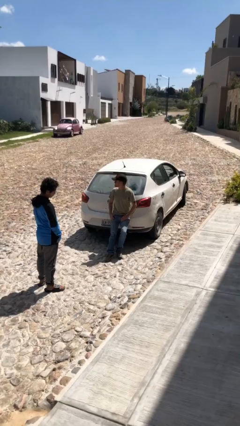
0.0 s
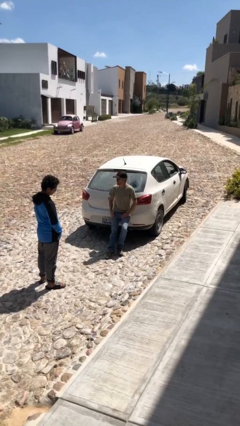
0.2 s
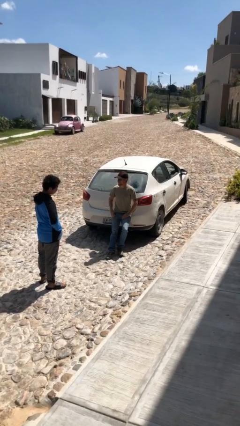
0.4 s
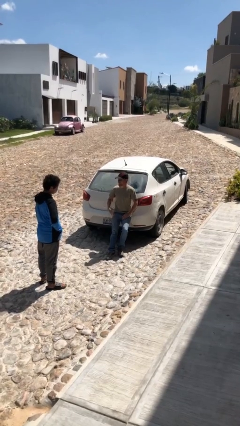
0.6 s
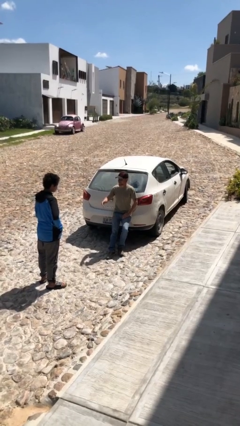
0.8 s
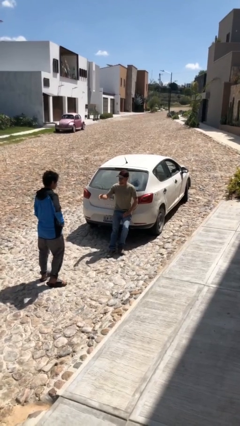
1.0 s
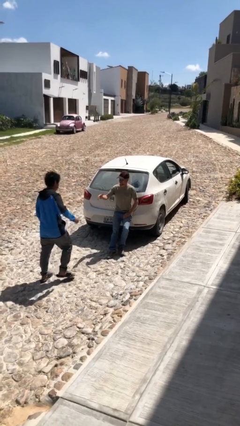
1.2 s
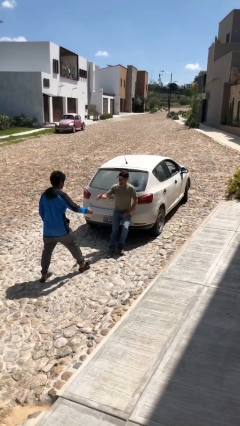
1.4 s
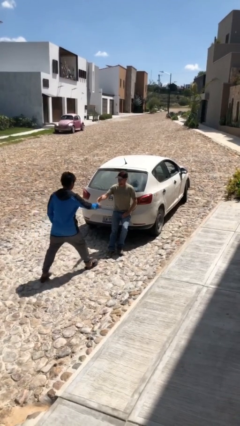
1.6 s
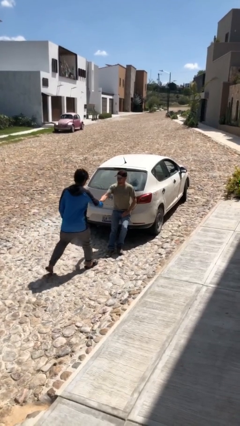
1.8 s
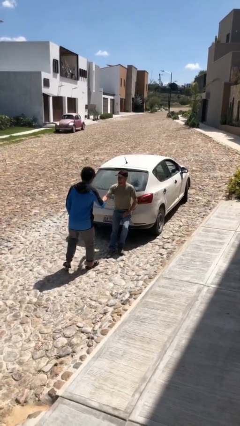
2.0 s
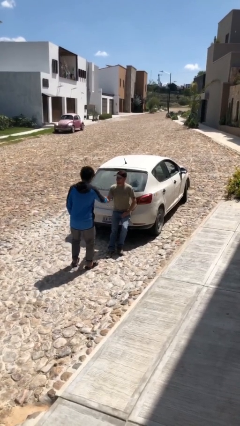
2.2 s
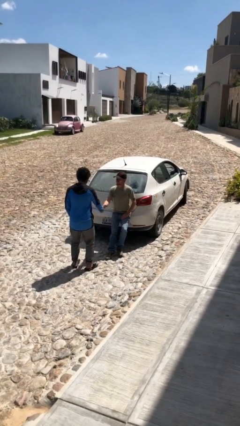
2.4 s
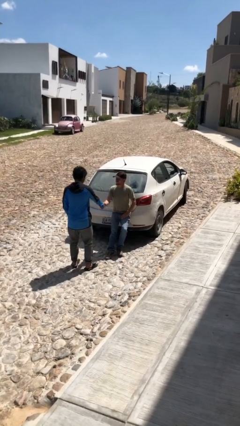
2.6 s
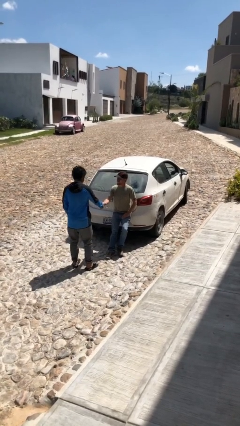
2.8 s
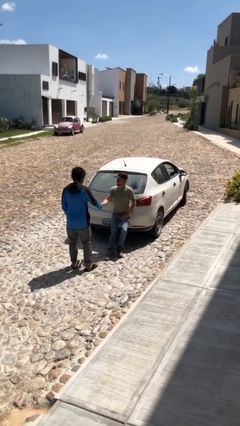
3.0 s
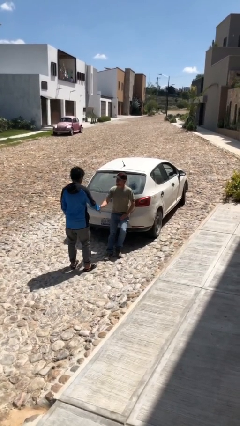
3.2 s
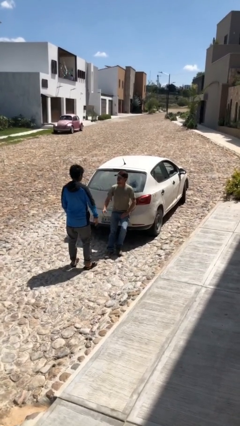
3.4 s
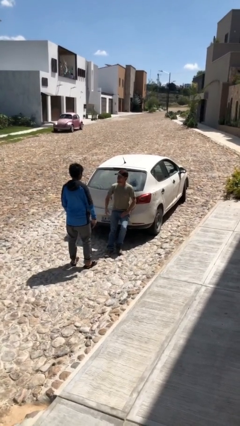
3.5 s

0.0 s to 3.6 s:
person shakes hand

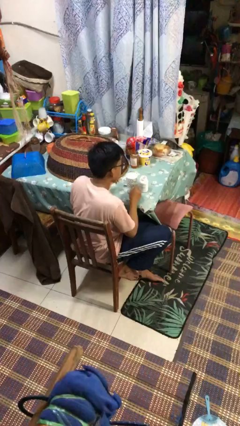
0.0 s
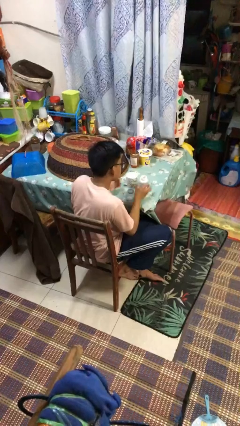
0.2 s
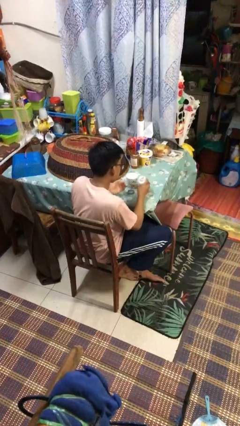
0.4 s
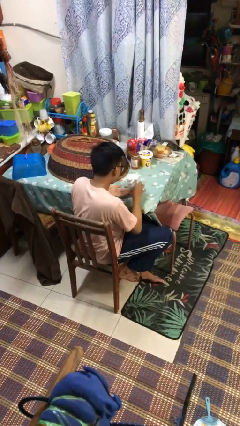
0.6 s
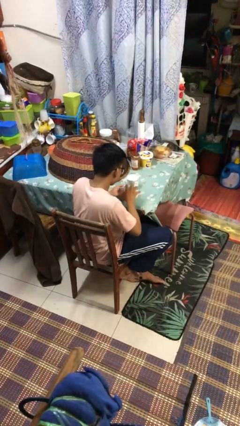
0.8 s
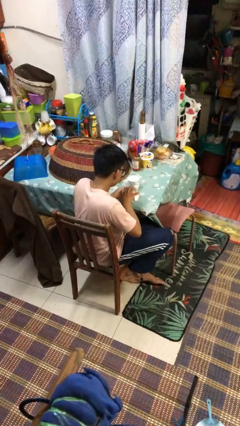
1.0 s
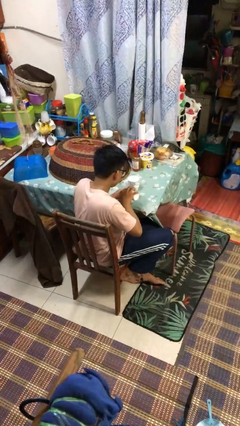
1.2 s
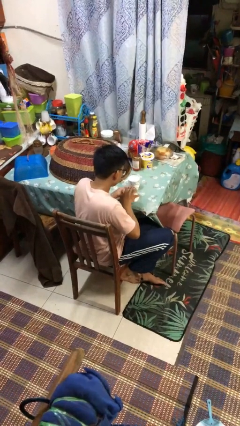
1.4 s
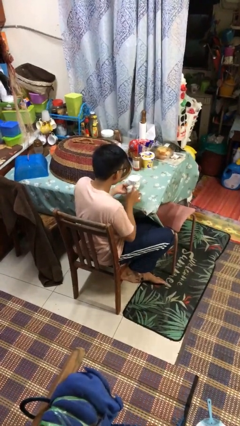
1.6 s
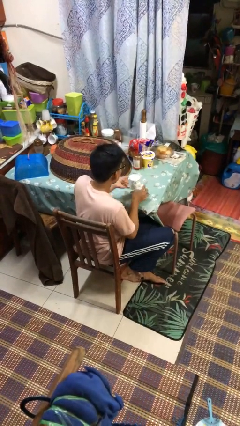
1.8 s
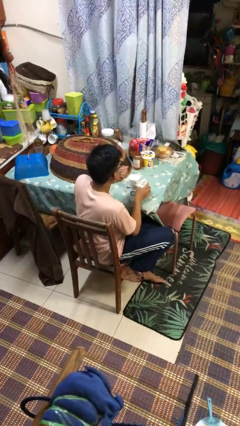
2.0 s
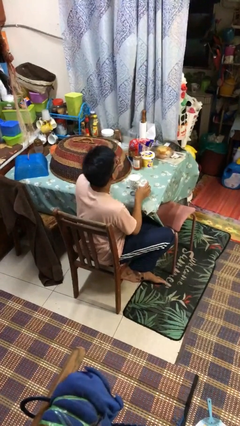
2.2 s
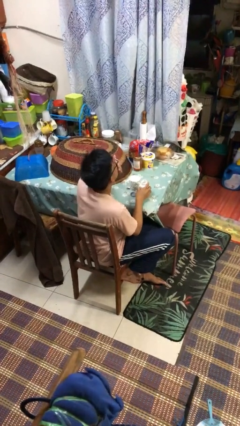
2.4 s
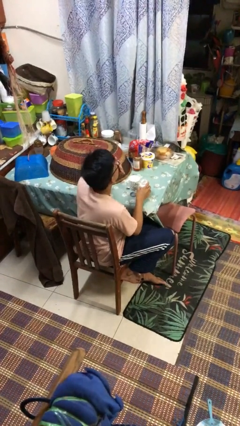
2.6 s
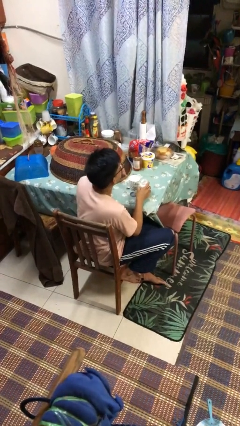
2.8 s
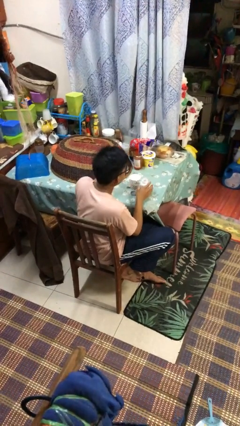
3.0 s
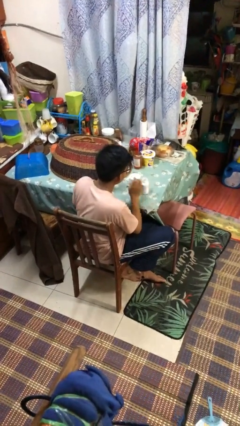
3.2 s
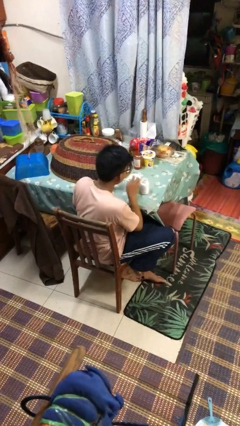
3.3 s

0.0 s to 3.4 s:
person takes medicine pills

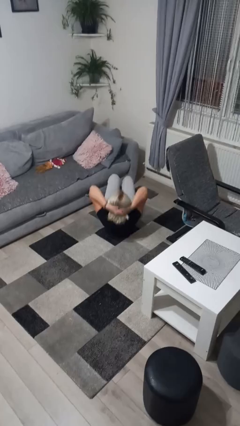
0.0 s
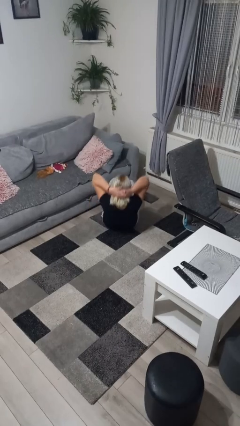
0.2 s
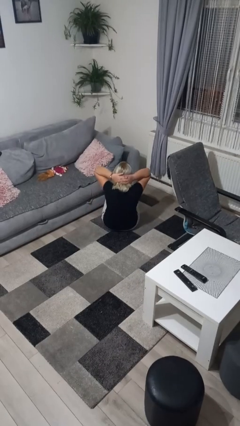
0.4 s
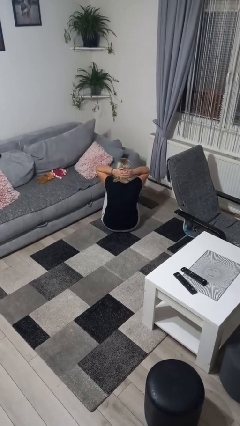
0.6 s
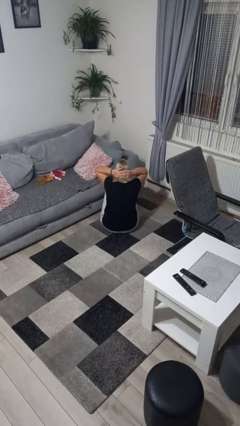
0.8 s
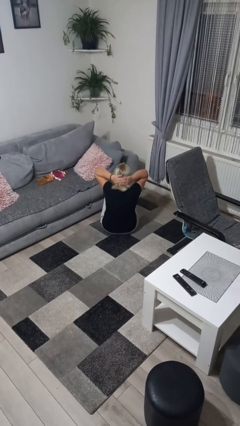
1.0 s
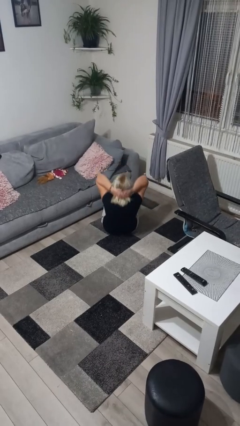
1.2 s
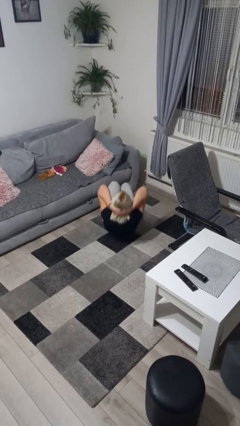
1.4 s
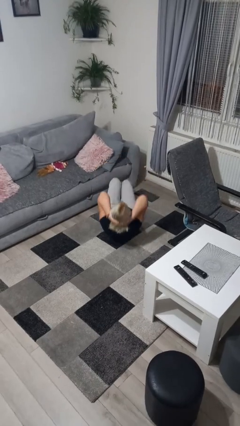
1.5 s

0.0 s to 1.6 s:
person exercises with situp

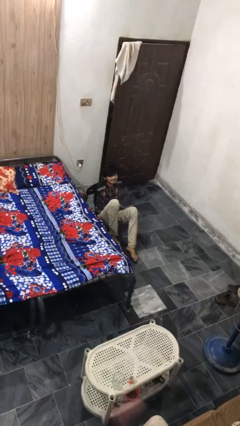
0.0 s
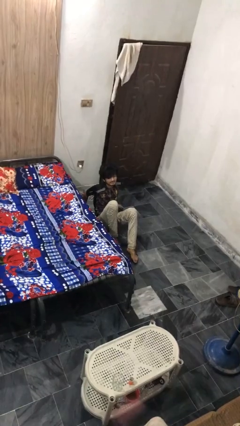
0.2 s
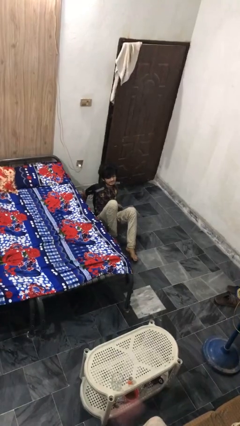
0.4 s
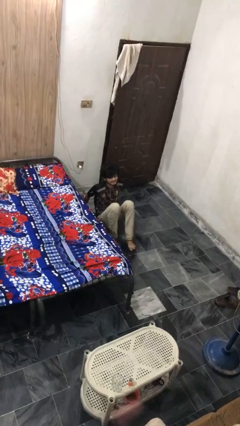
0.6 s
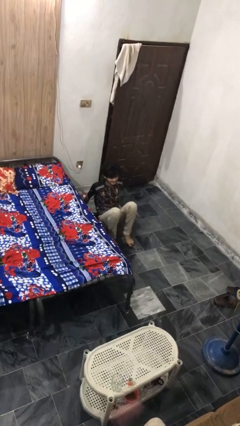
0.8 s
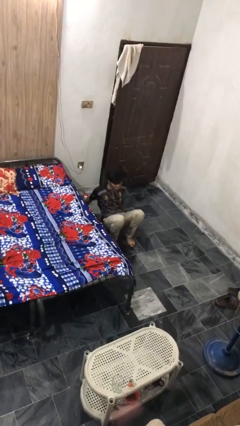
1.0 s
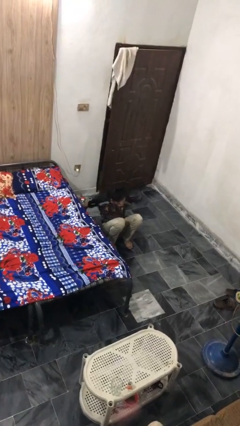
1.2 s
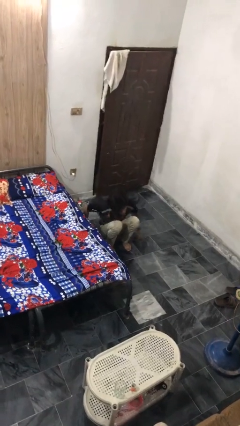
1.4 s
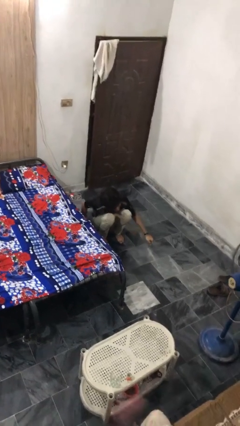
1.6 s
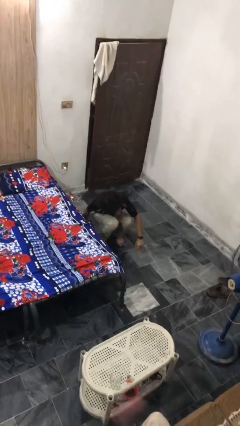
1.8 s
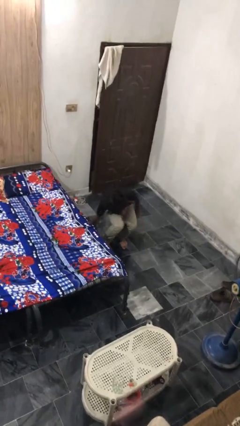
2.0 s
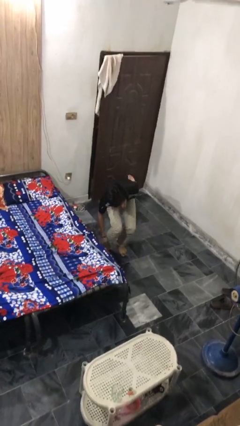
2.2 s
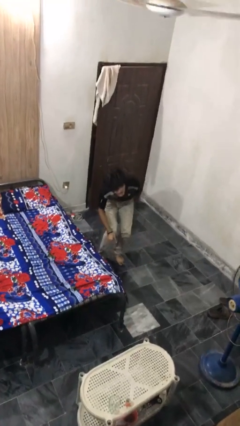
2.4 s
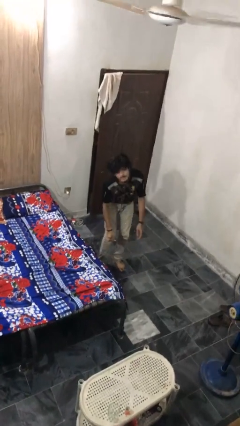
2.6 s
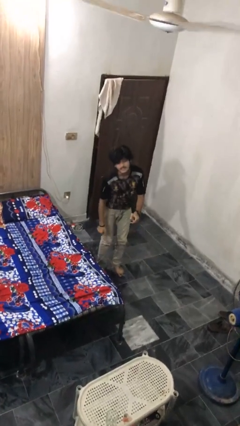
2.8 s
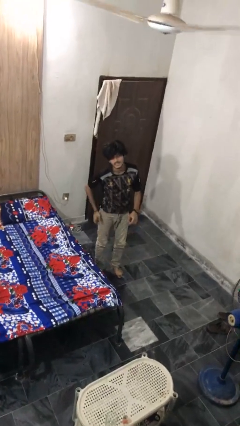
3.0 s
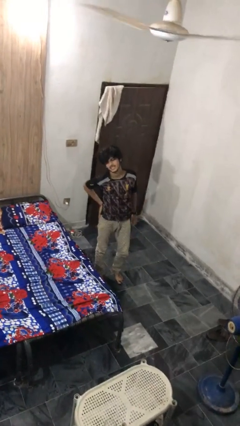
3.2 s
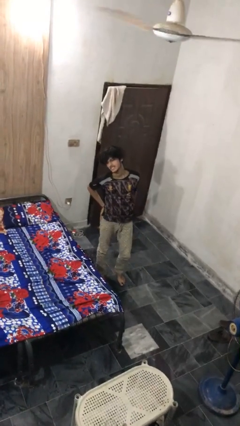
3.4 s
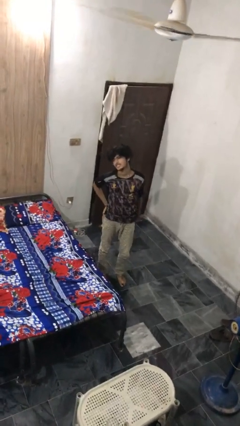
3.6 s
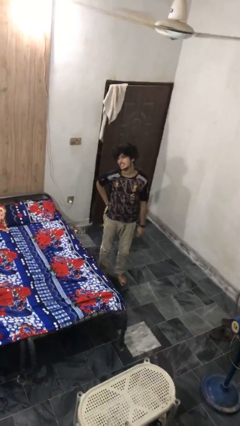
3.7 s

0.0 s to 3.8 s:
person stands up from floor

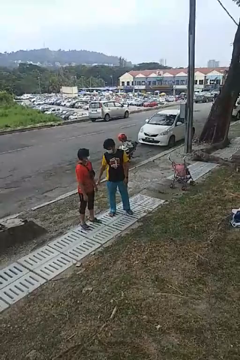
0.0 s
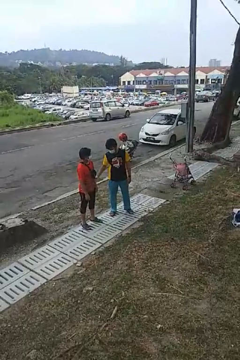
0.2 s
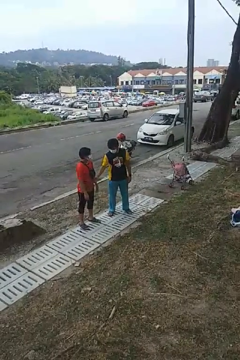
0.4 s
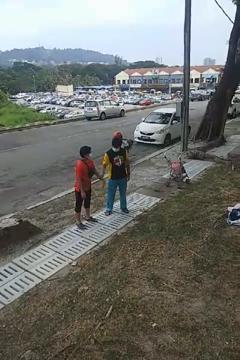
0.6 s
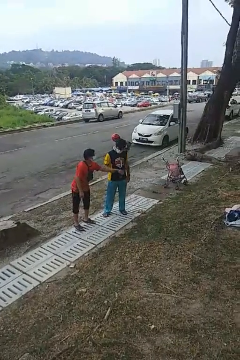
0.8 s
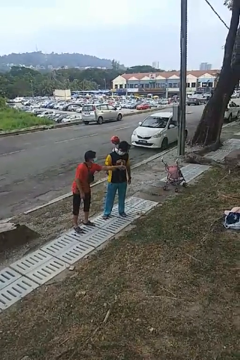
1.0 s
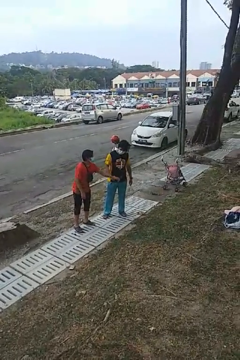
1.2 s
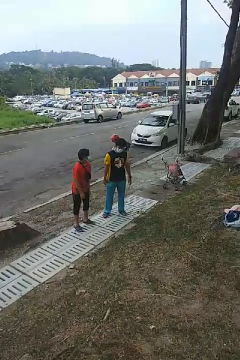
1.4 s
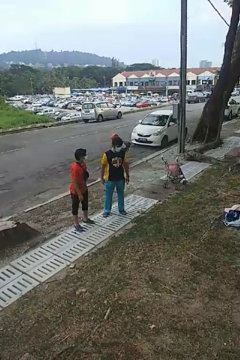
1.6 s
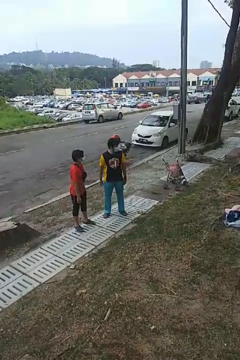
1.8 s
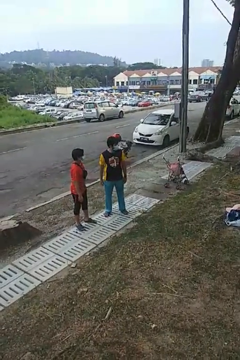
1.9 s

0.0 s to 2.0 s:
person grabs person by forearm

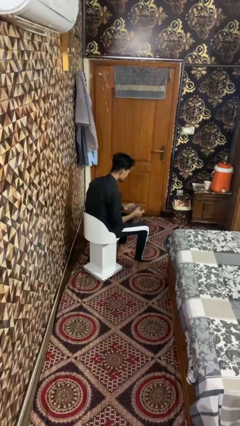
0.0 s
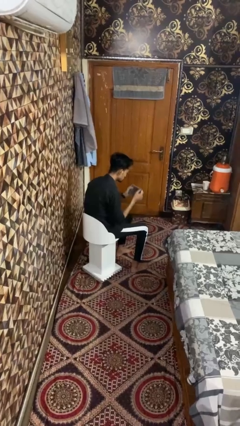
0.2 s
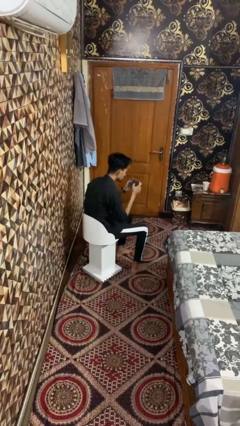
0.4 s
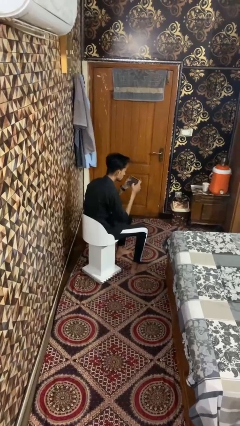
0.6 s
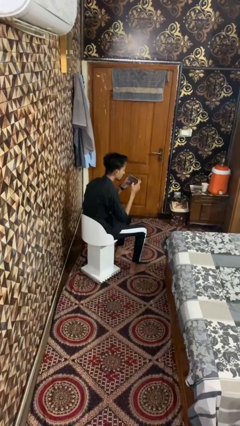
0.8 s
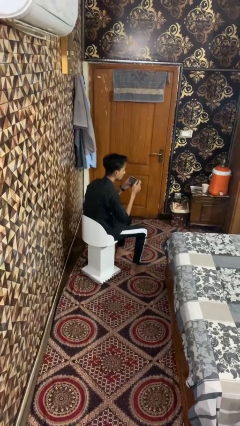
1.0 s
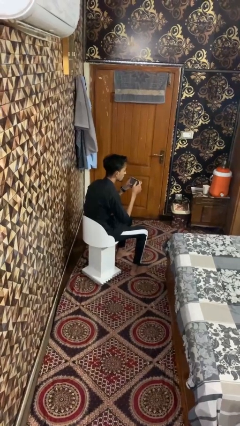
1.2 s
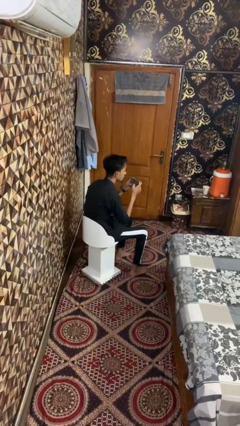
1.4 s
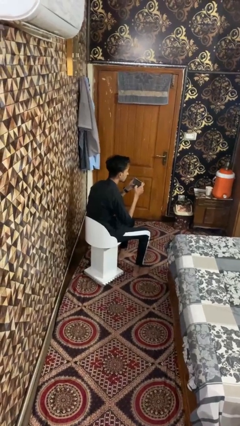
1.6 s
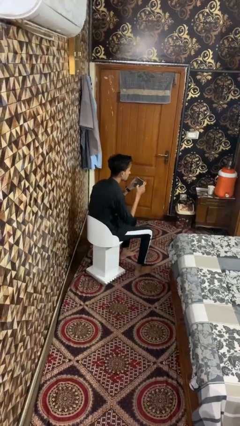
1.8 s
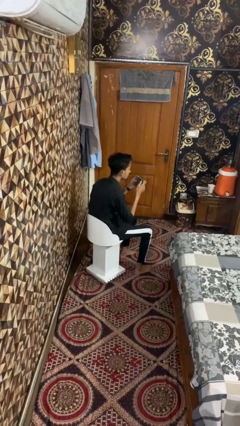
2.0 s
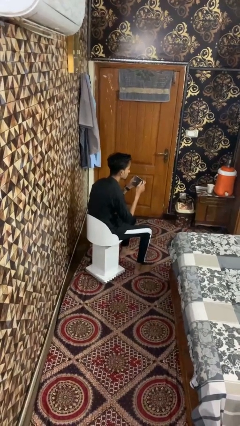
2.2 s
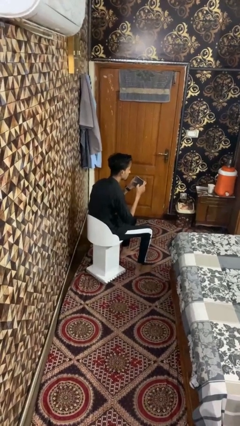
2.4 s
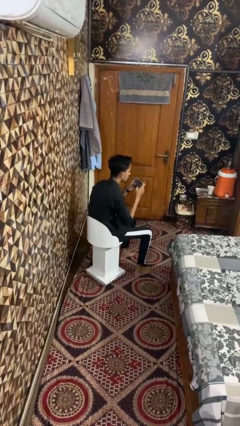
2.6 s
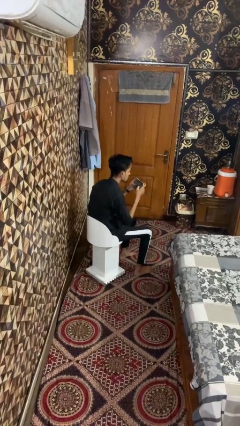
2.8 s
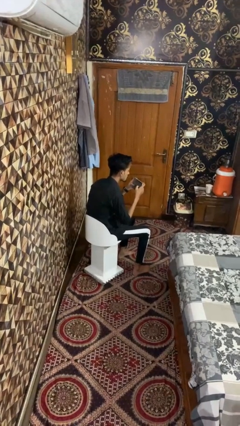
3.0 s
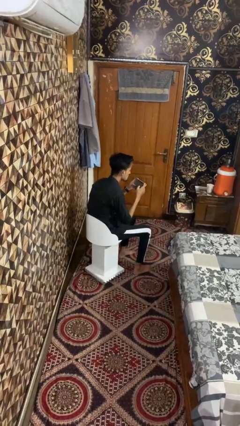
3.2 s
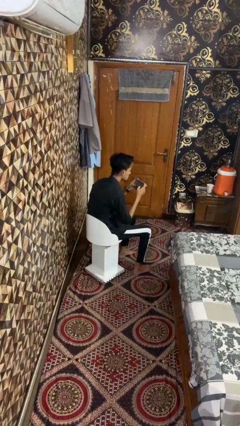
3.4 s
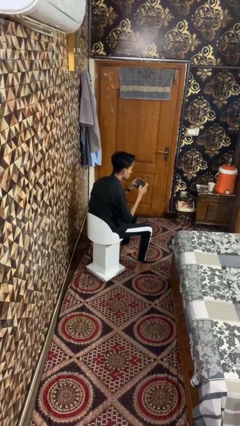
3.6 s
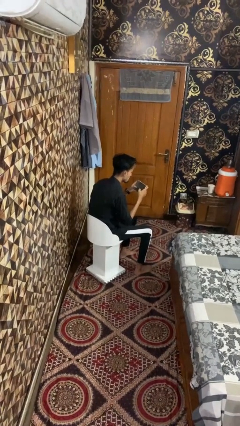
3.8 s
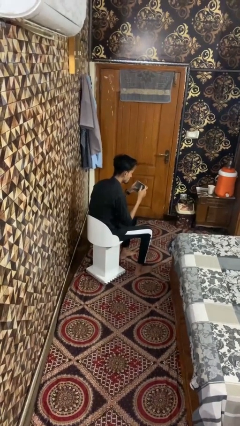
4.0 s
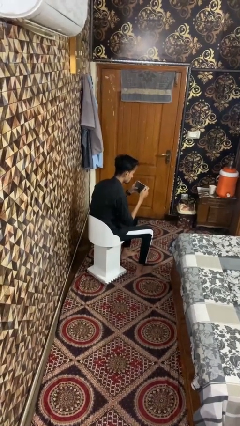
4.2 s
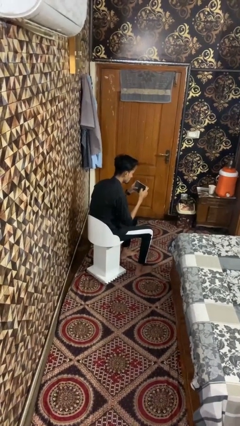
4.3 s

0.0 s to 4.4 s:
person taps object with finger
